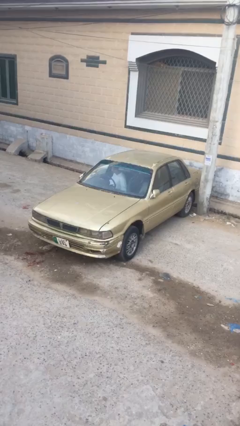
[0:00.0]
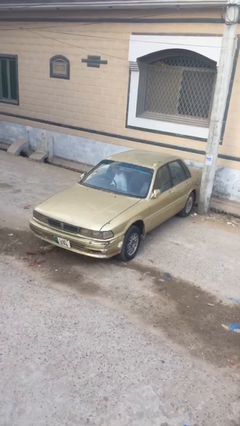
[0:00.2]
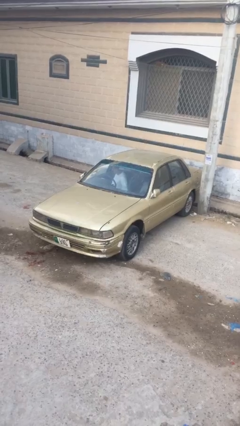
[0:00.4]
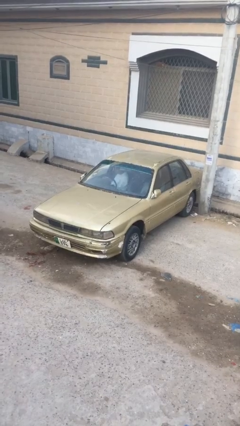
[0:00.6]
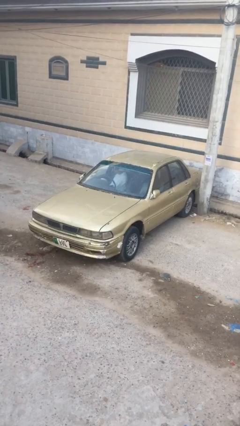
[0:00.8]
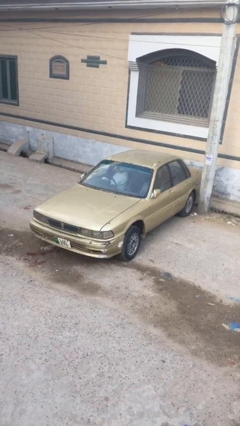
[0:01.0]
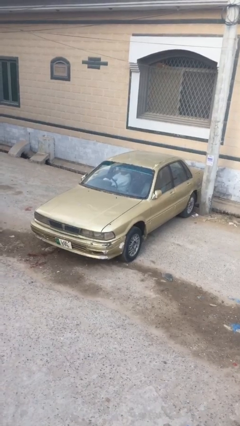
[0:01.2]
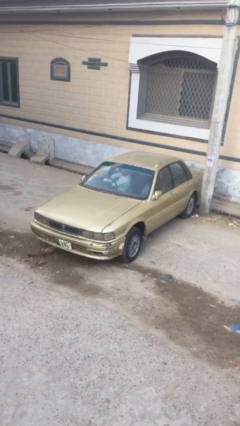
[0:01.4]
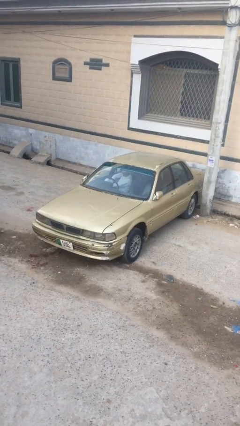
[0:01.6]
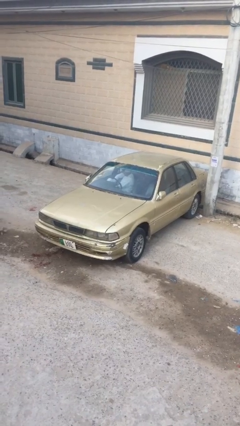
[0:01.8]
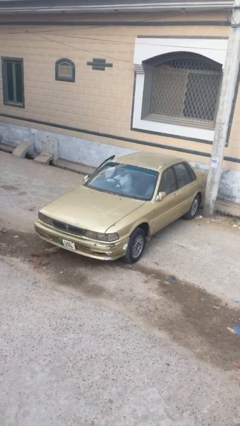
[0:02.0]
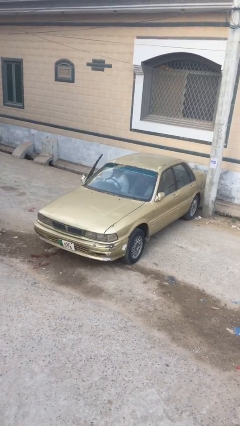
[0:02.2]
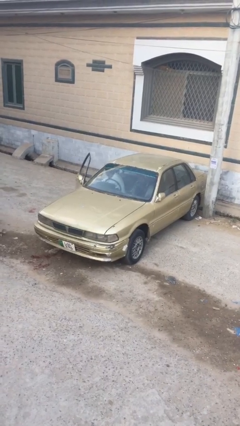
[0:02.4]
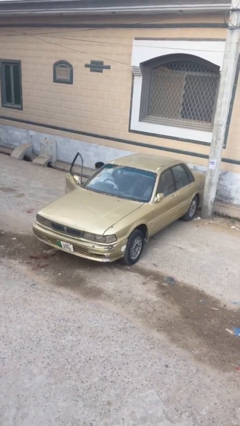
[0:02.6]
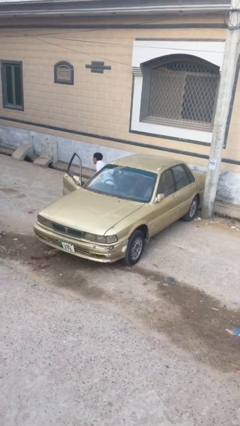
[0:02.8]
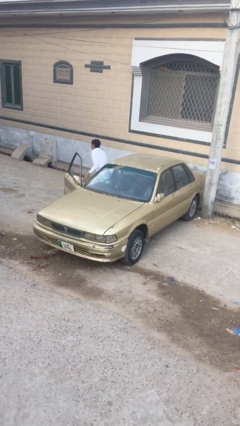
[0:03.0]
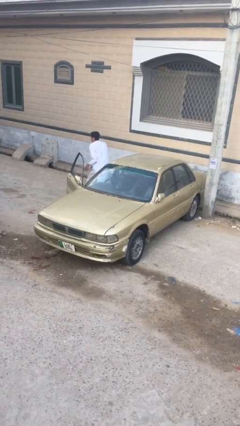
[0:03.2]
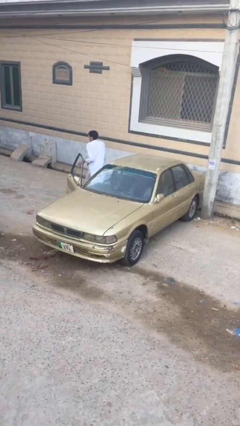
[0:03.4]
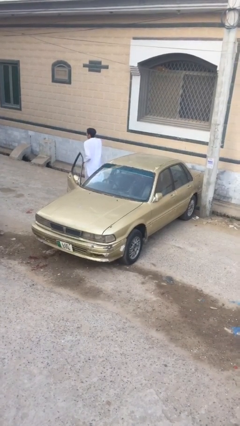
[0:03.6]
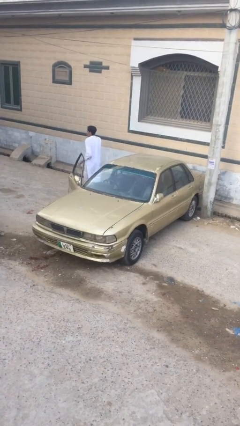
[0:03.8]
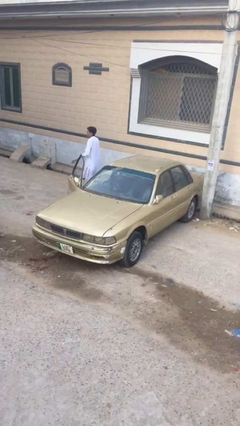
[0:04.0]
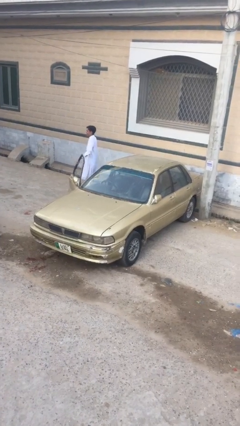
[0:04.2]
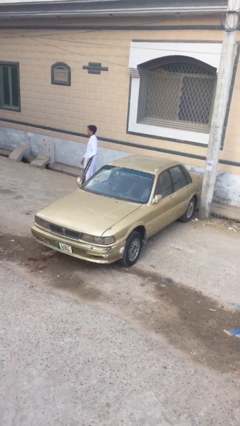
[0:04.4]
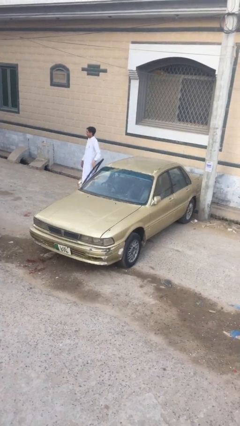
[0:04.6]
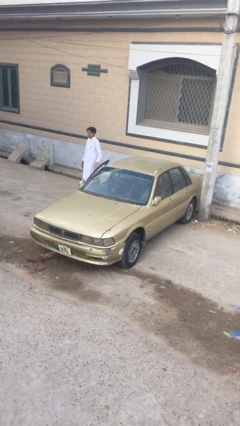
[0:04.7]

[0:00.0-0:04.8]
car drops off person

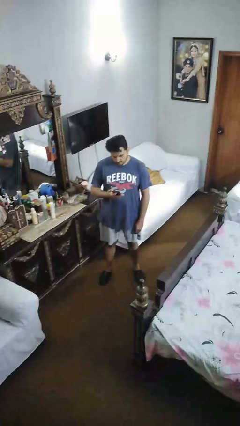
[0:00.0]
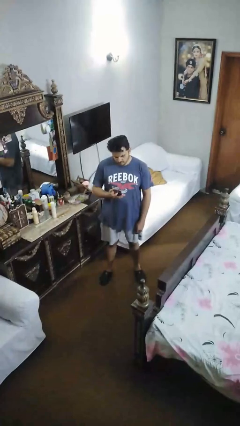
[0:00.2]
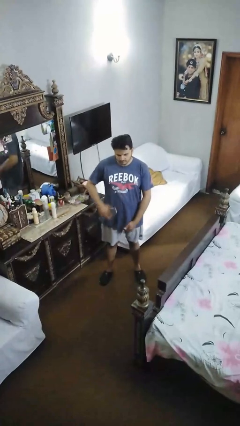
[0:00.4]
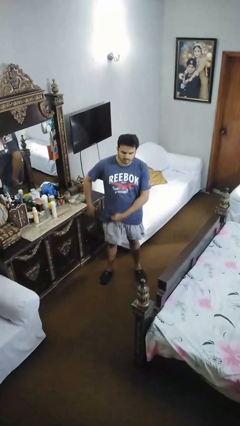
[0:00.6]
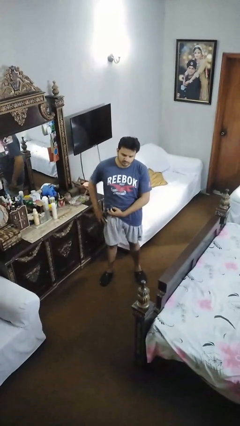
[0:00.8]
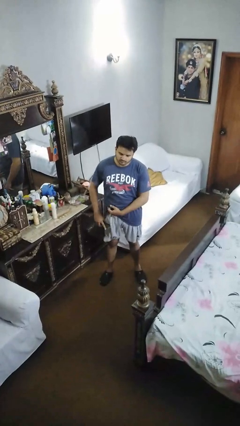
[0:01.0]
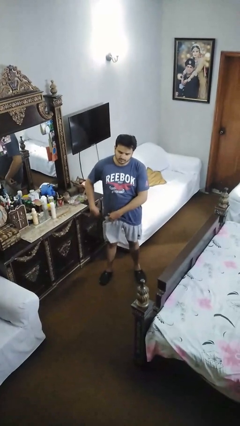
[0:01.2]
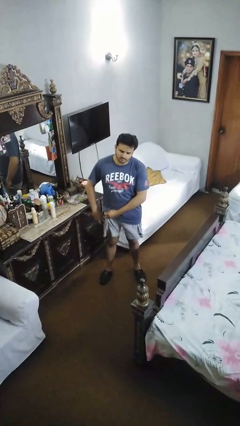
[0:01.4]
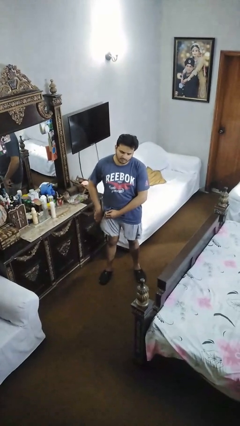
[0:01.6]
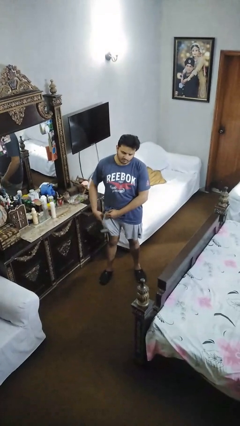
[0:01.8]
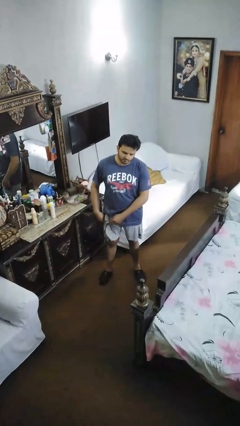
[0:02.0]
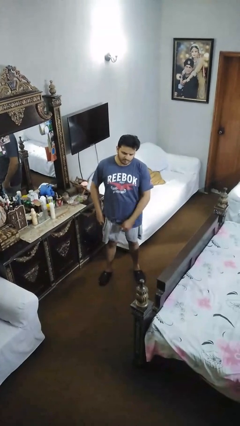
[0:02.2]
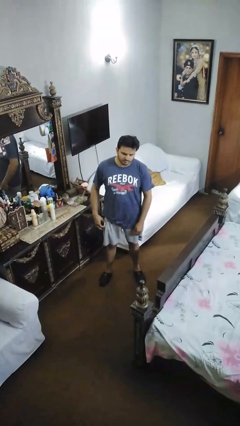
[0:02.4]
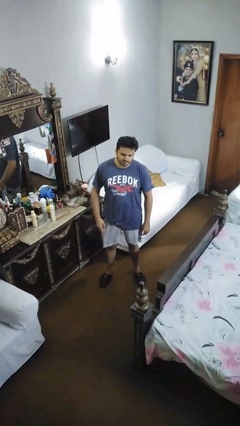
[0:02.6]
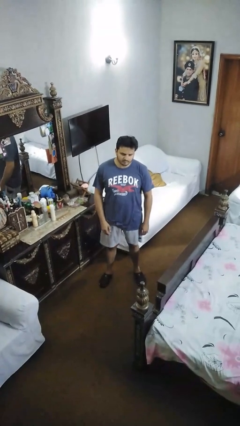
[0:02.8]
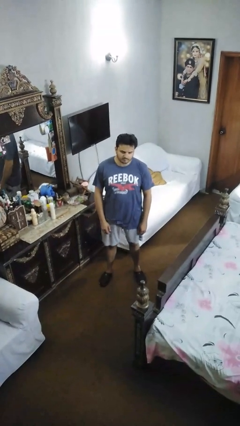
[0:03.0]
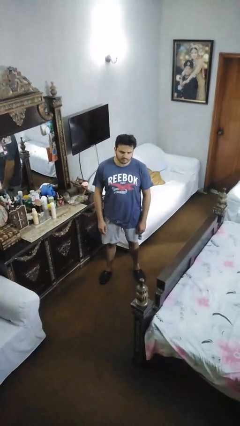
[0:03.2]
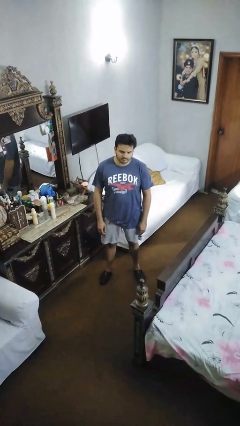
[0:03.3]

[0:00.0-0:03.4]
person puts phone into pocket

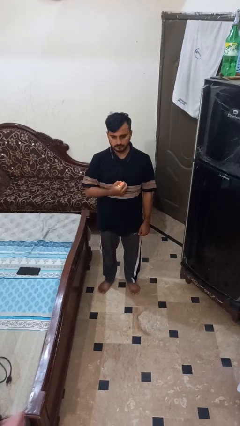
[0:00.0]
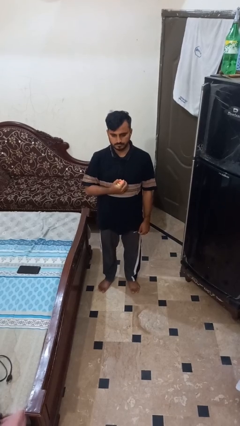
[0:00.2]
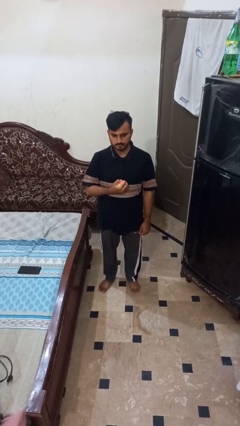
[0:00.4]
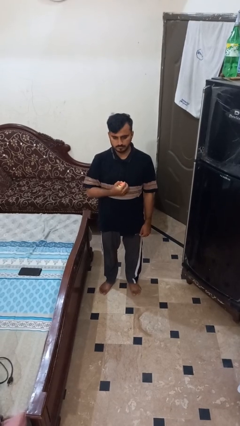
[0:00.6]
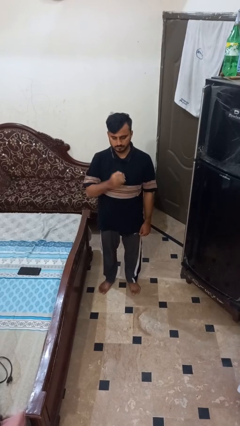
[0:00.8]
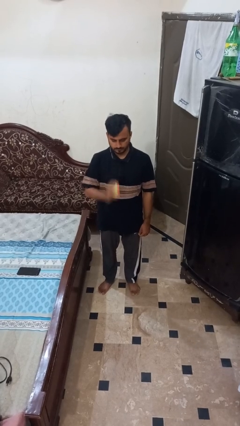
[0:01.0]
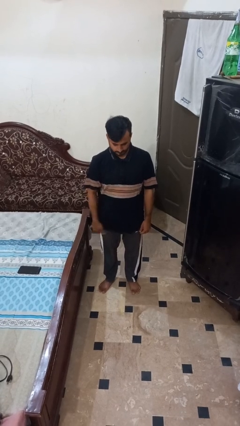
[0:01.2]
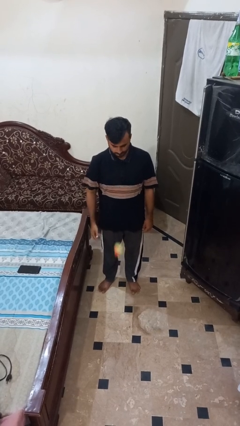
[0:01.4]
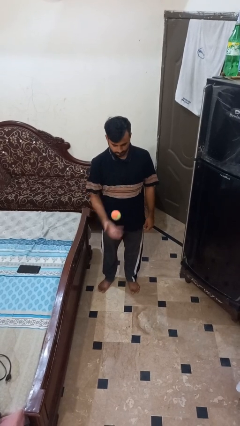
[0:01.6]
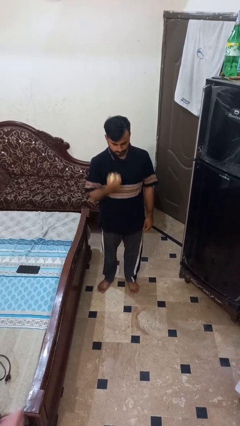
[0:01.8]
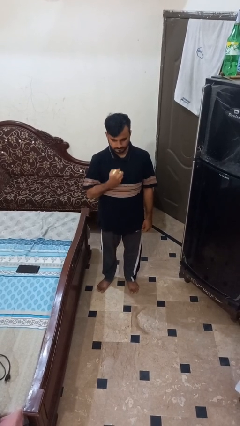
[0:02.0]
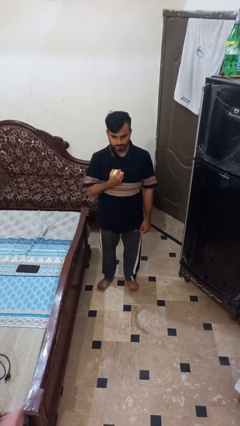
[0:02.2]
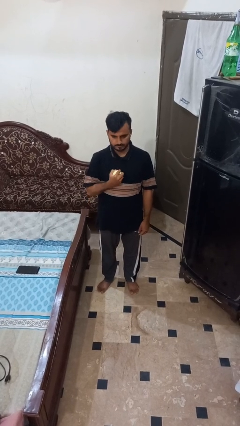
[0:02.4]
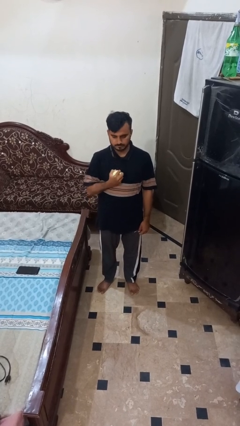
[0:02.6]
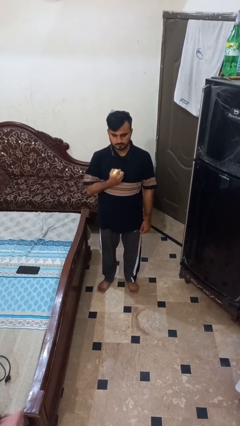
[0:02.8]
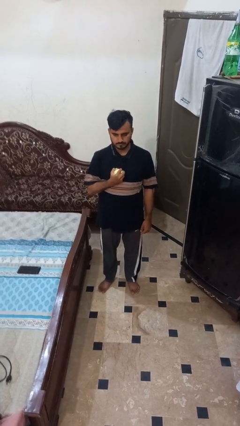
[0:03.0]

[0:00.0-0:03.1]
person bounces ball on floor

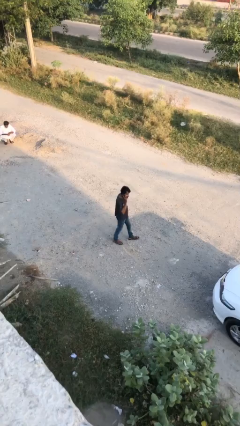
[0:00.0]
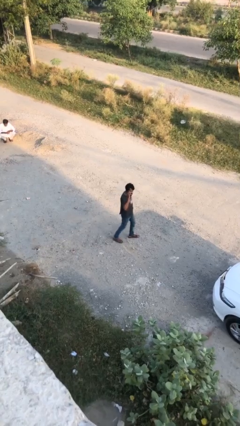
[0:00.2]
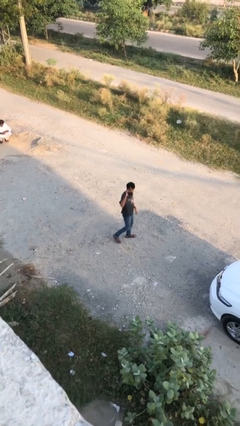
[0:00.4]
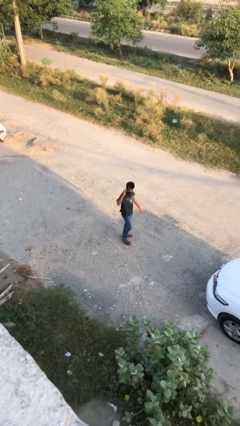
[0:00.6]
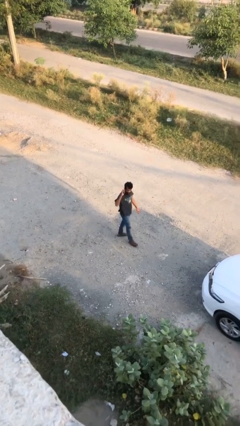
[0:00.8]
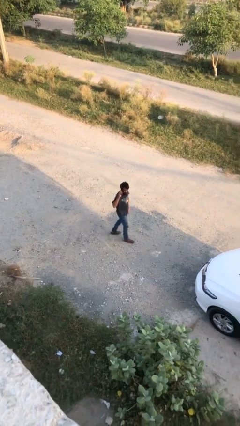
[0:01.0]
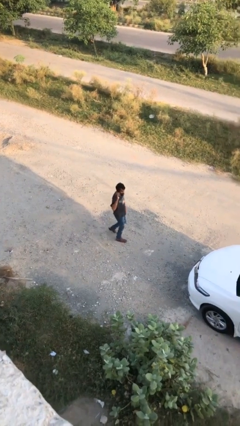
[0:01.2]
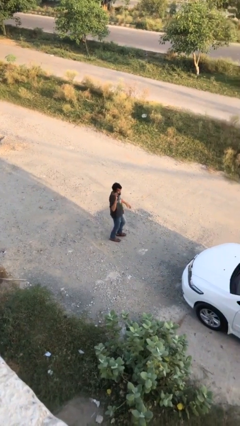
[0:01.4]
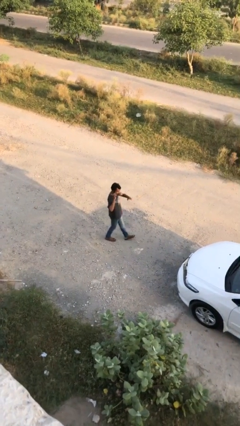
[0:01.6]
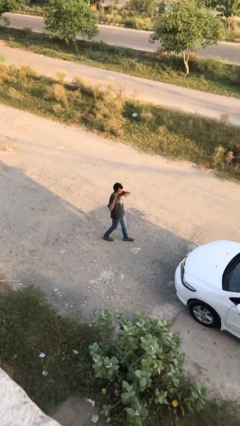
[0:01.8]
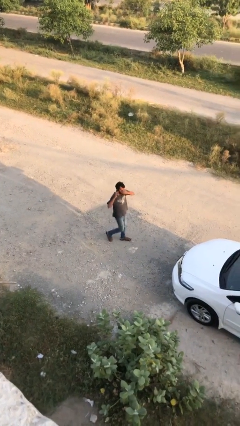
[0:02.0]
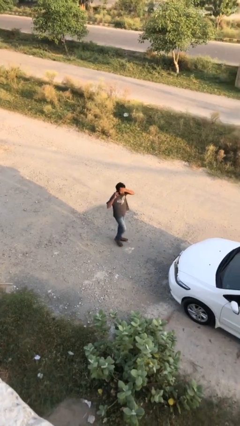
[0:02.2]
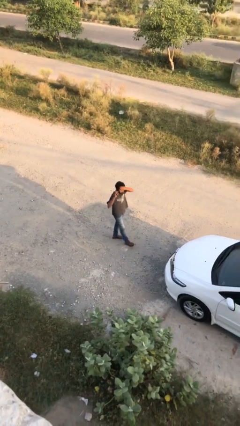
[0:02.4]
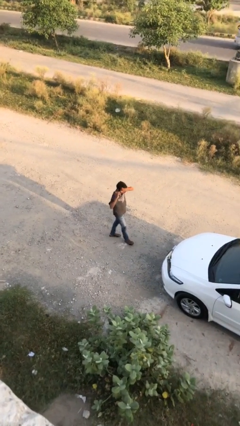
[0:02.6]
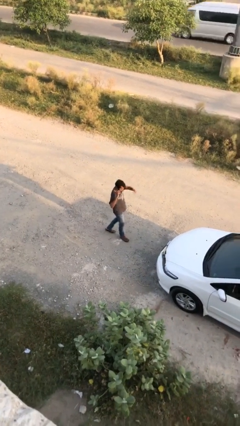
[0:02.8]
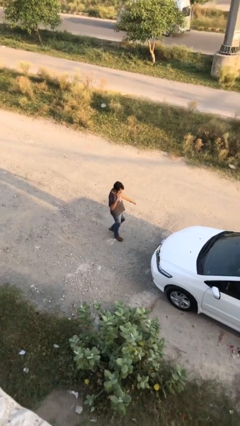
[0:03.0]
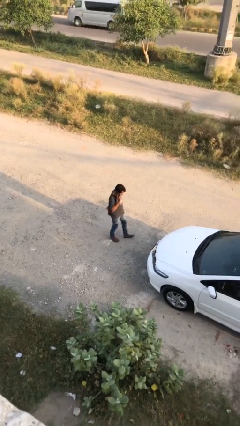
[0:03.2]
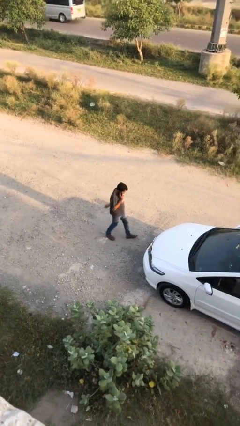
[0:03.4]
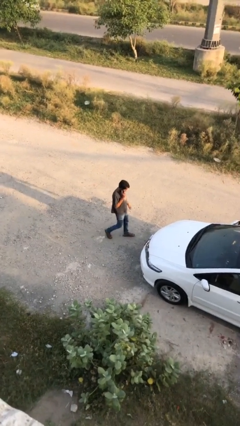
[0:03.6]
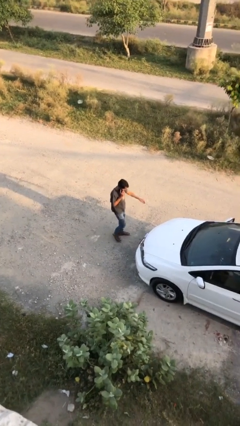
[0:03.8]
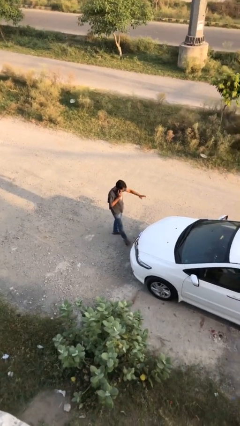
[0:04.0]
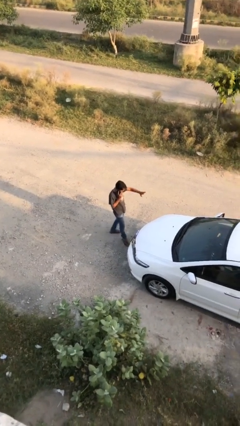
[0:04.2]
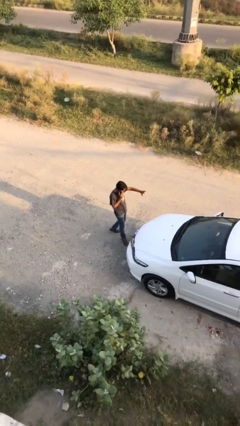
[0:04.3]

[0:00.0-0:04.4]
person talks on phone

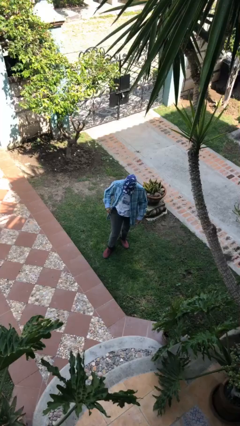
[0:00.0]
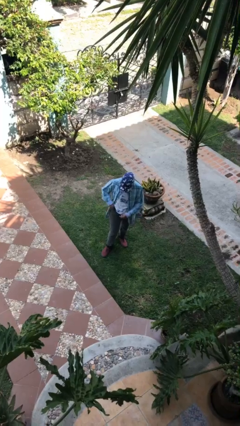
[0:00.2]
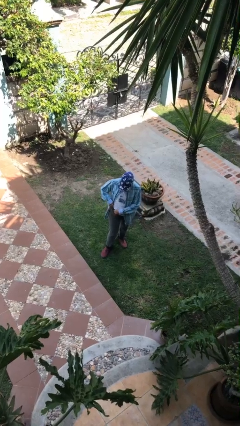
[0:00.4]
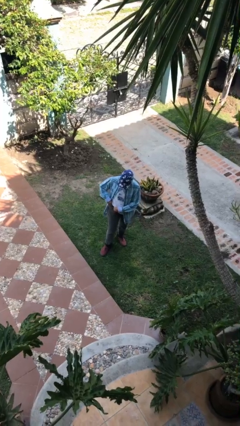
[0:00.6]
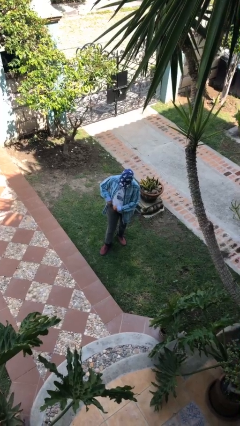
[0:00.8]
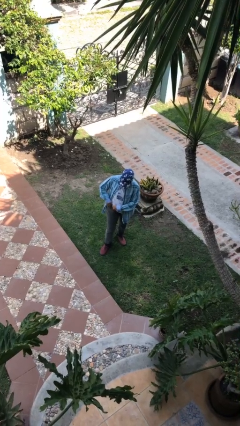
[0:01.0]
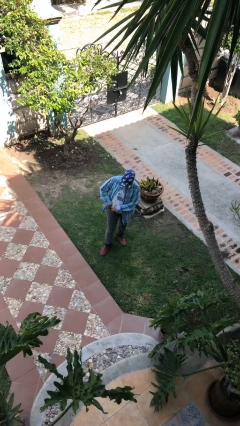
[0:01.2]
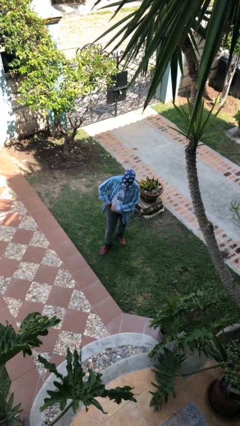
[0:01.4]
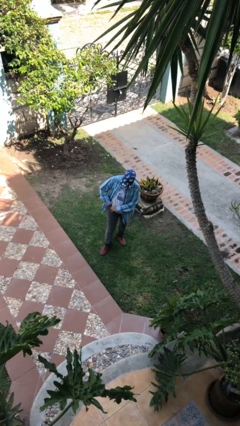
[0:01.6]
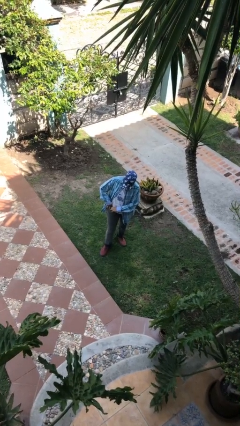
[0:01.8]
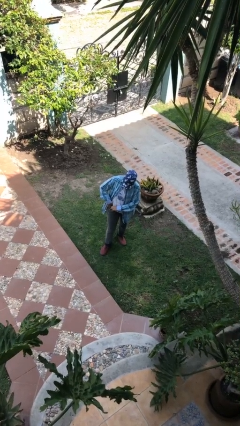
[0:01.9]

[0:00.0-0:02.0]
person takes phone from pocket
